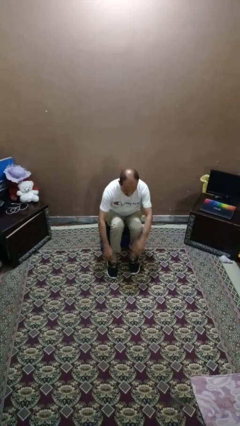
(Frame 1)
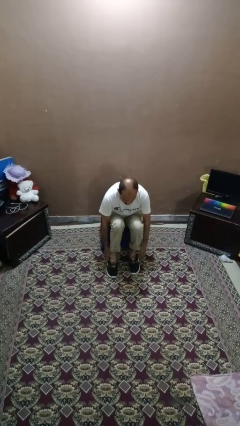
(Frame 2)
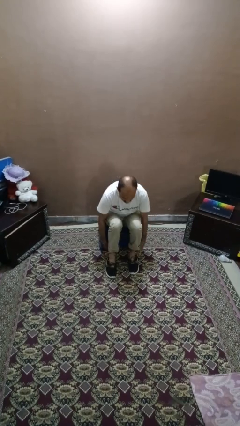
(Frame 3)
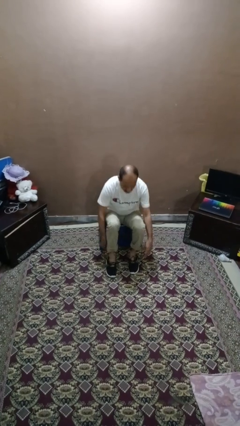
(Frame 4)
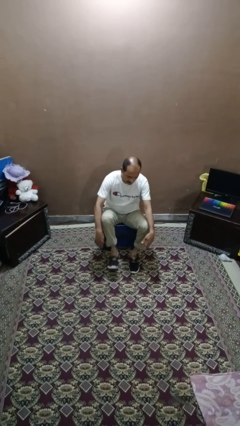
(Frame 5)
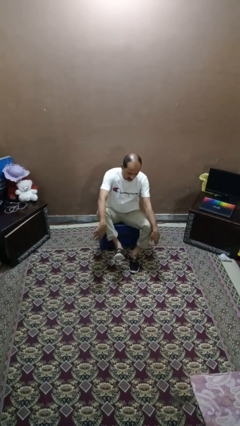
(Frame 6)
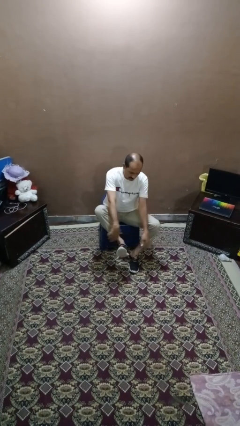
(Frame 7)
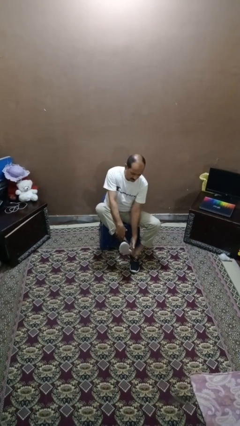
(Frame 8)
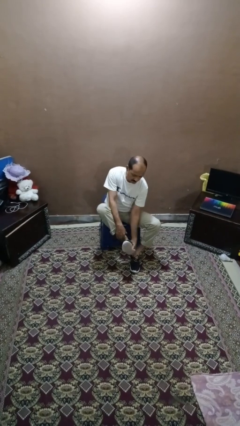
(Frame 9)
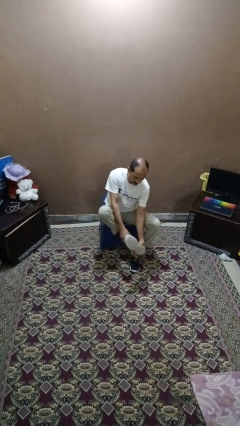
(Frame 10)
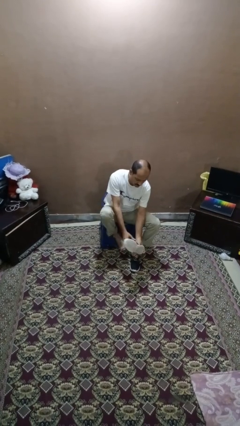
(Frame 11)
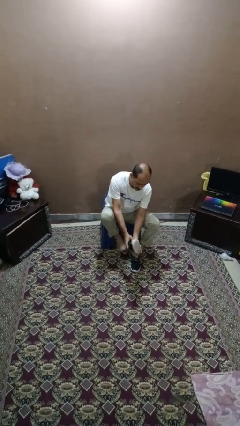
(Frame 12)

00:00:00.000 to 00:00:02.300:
person takes off shoes

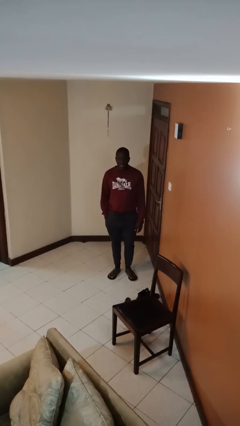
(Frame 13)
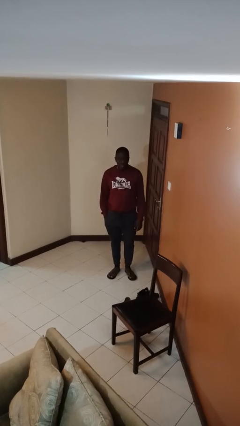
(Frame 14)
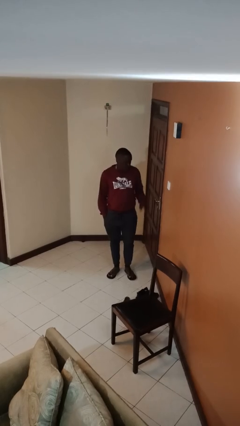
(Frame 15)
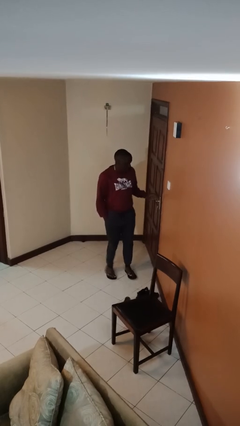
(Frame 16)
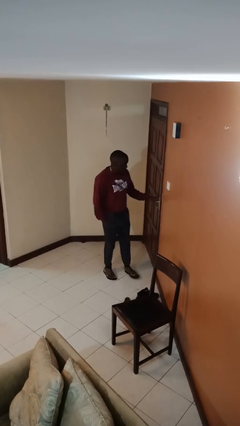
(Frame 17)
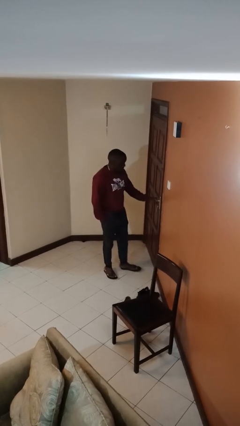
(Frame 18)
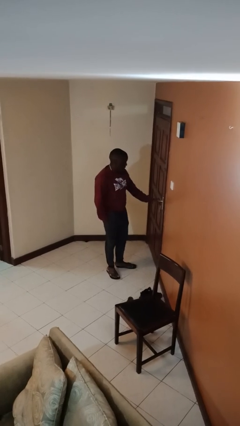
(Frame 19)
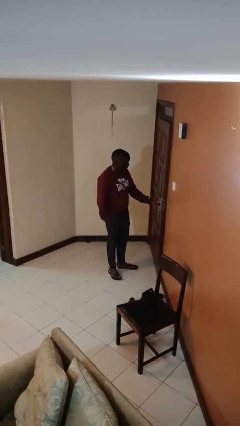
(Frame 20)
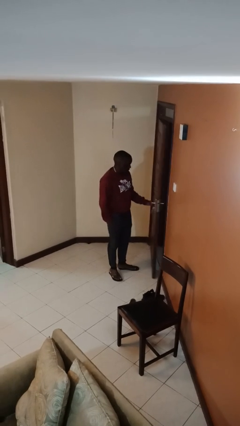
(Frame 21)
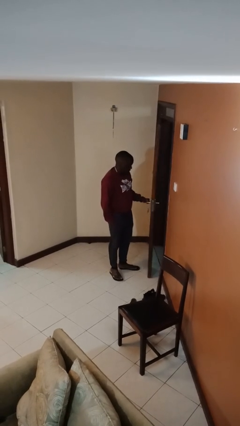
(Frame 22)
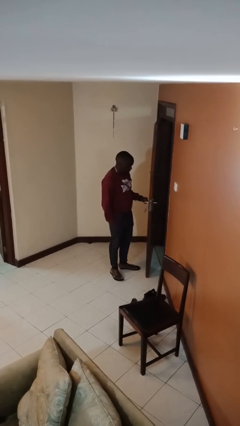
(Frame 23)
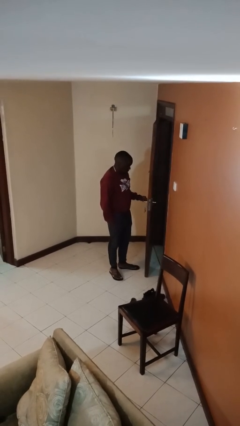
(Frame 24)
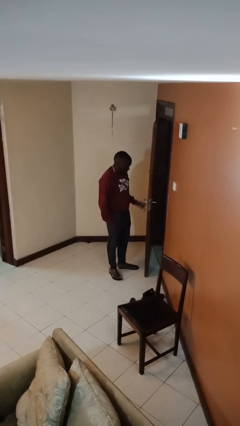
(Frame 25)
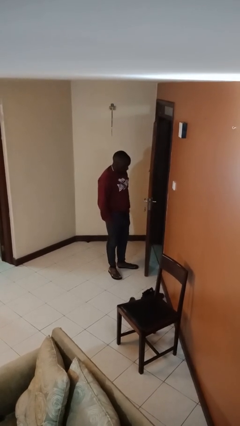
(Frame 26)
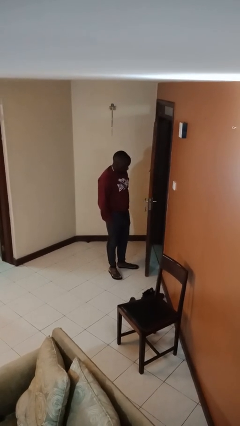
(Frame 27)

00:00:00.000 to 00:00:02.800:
person opens facility door

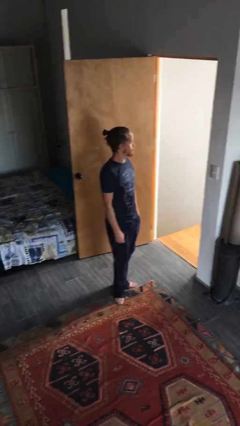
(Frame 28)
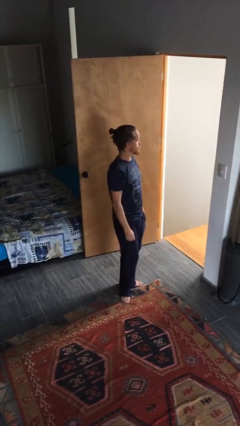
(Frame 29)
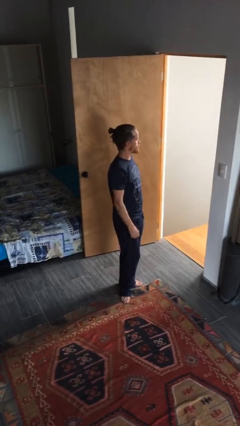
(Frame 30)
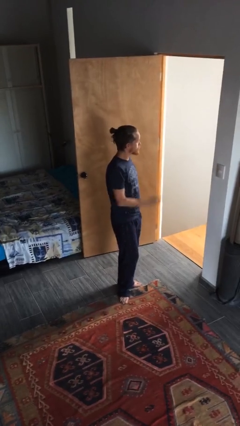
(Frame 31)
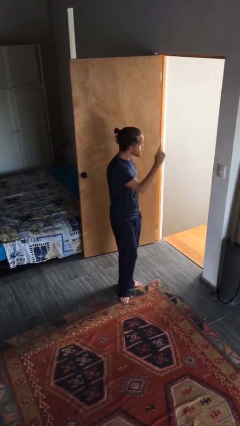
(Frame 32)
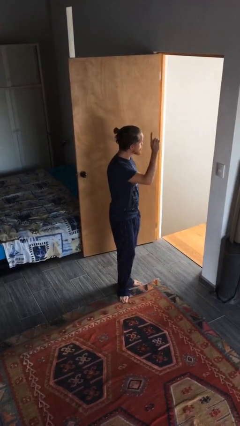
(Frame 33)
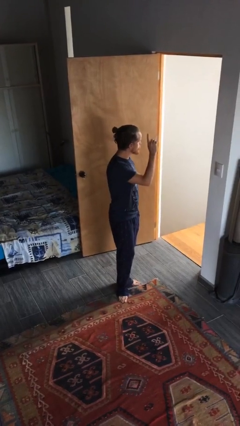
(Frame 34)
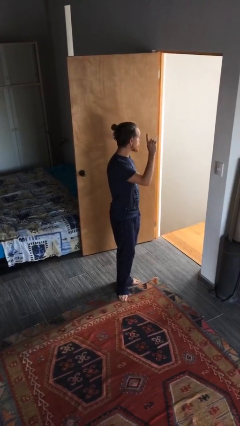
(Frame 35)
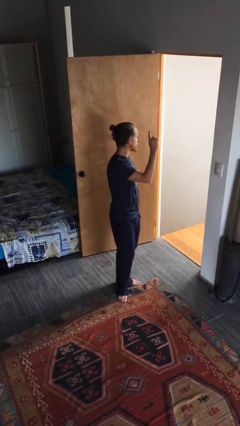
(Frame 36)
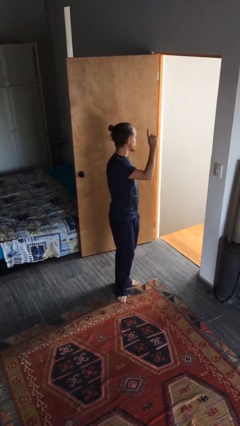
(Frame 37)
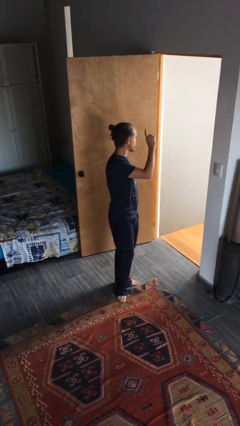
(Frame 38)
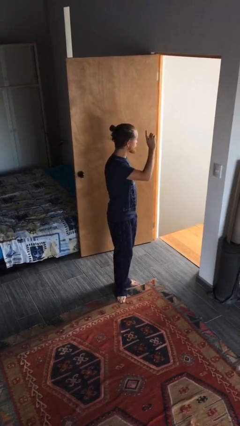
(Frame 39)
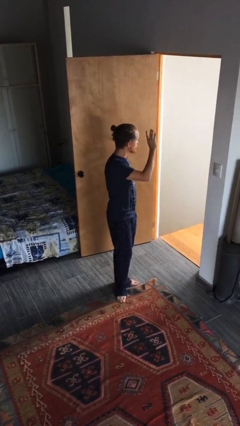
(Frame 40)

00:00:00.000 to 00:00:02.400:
person gestures raise hand

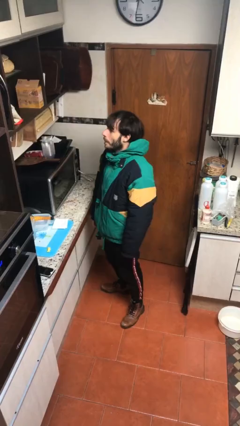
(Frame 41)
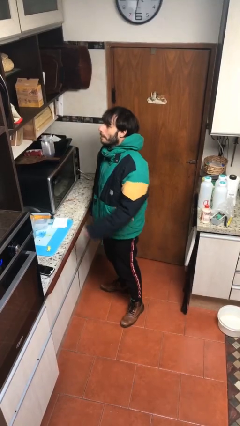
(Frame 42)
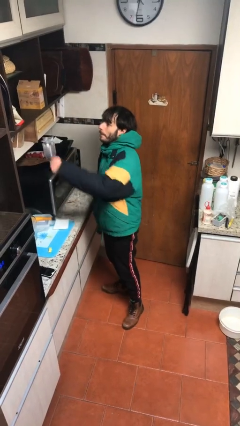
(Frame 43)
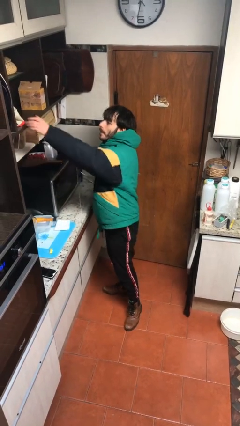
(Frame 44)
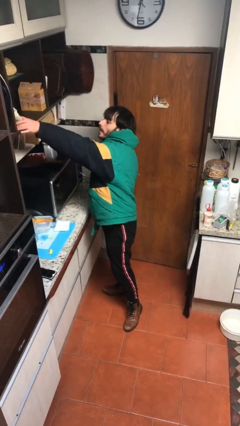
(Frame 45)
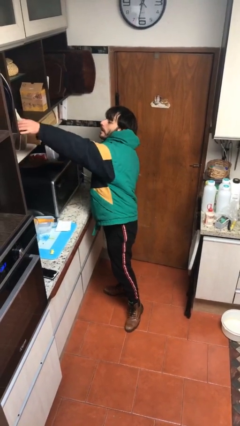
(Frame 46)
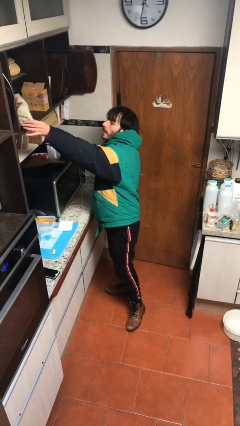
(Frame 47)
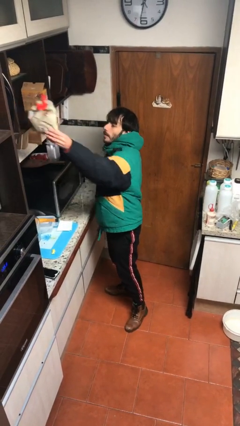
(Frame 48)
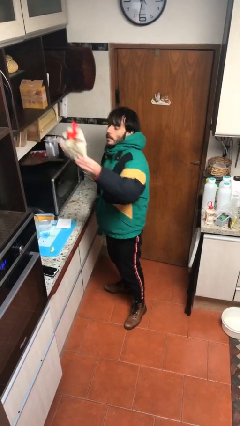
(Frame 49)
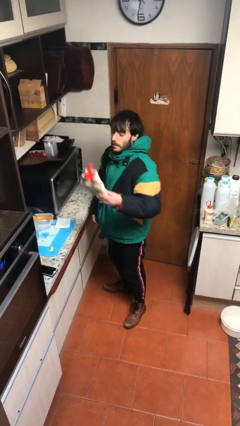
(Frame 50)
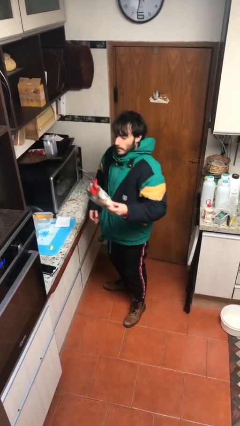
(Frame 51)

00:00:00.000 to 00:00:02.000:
person picks up object from cabinet

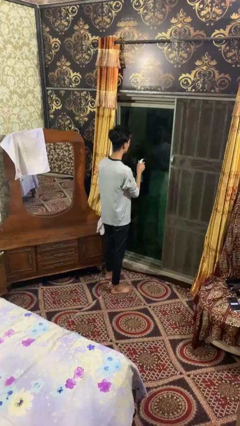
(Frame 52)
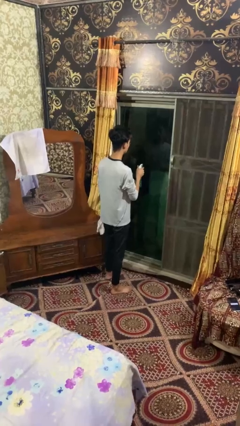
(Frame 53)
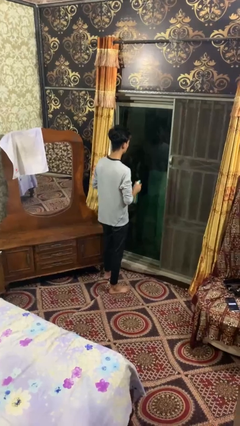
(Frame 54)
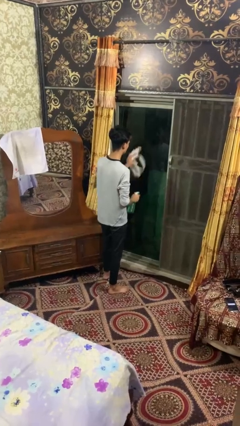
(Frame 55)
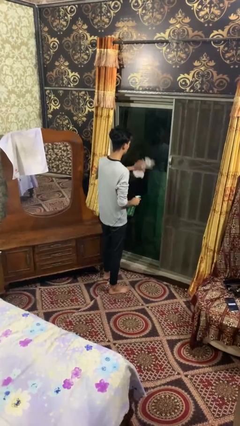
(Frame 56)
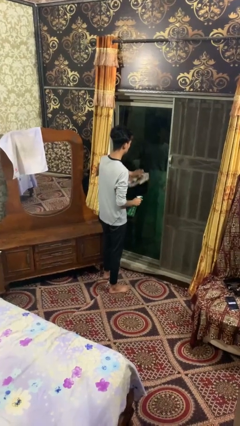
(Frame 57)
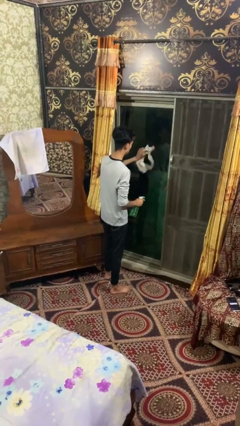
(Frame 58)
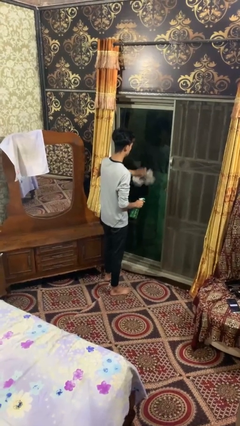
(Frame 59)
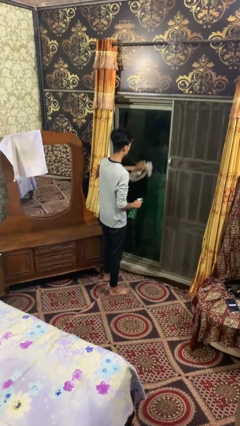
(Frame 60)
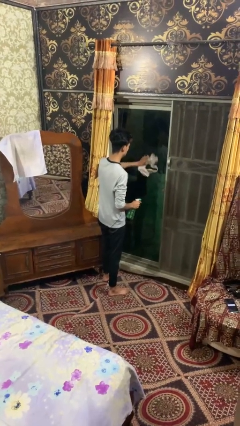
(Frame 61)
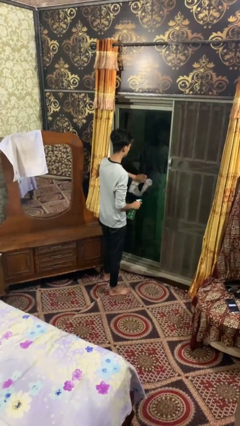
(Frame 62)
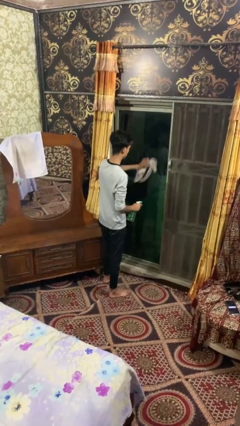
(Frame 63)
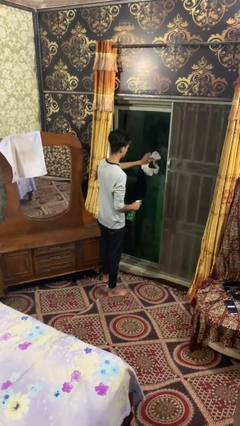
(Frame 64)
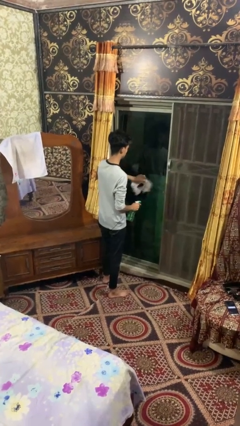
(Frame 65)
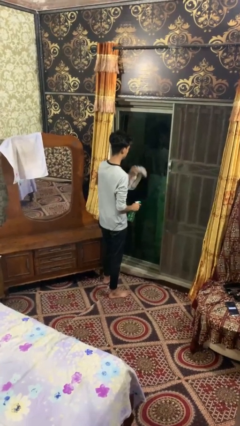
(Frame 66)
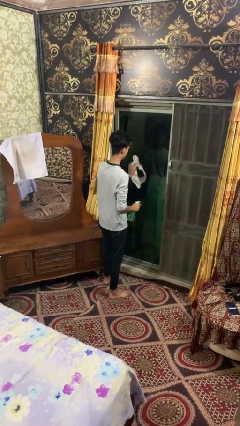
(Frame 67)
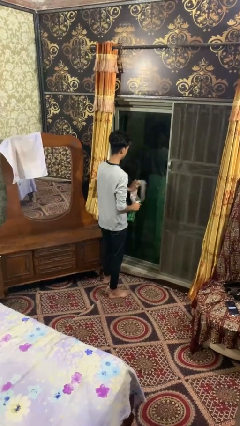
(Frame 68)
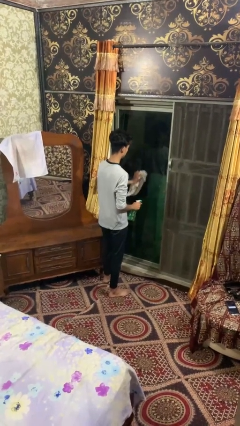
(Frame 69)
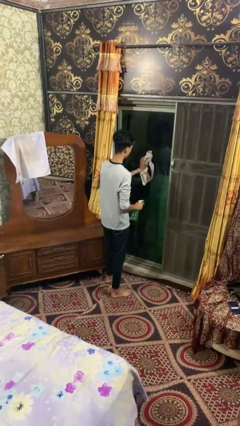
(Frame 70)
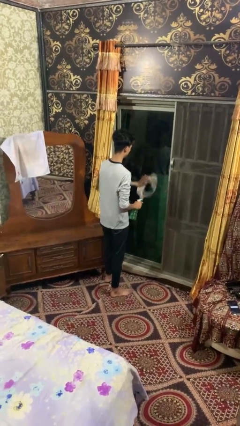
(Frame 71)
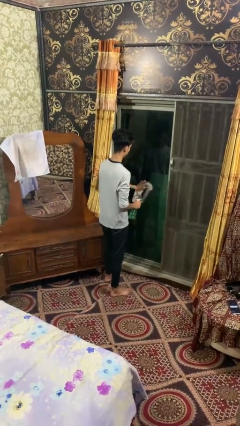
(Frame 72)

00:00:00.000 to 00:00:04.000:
person washes window

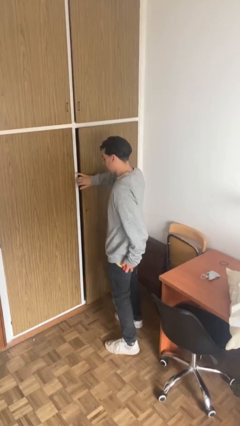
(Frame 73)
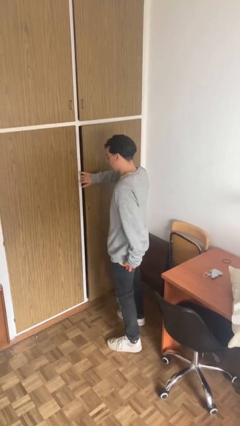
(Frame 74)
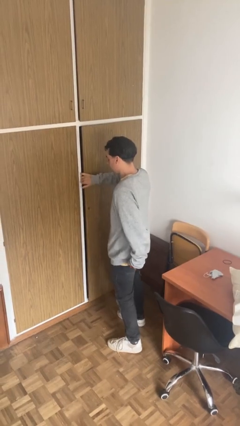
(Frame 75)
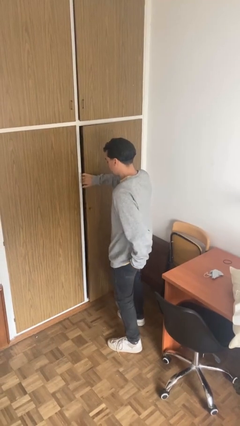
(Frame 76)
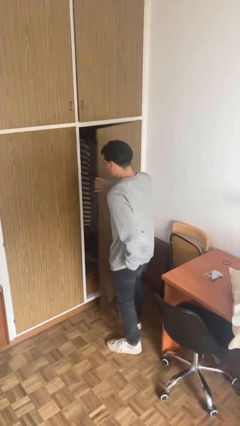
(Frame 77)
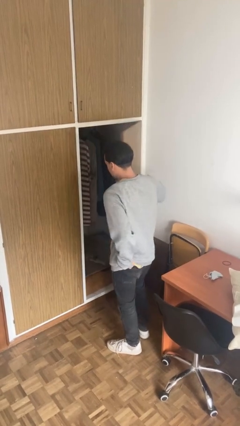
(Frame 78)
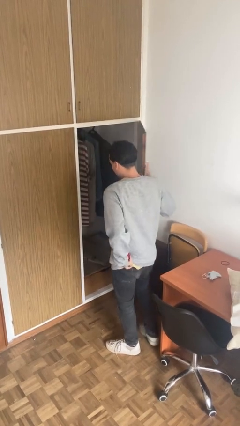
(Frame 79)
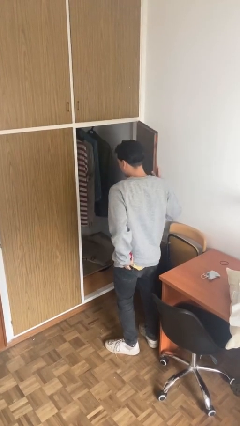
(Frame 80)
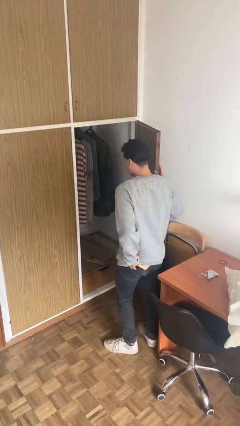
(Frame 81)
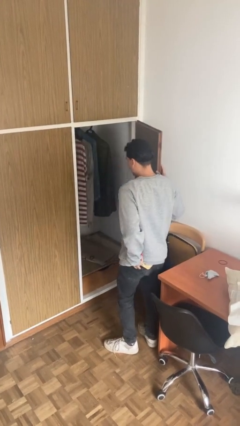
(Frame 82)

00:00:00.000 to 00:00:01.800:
person opens closet door

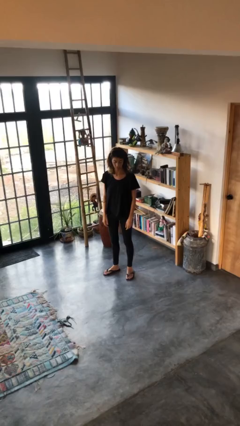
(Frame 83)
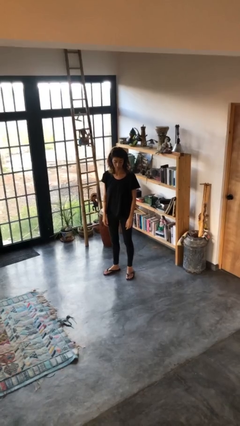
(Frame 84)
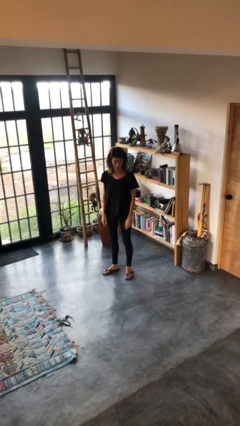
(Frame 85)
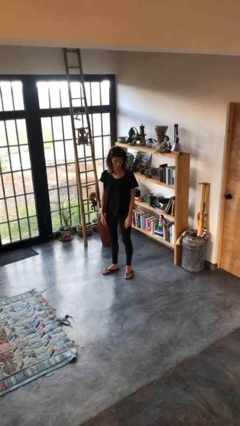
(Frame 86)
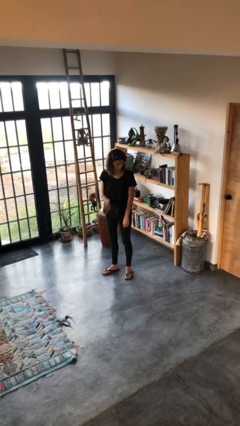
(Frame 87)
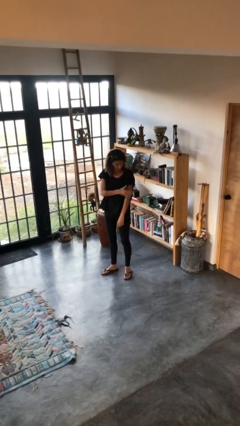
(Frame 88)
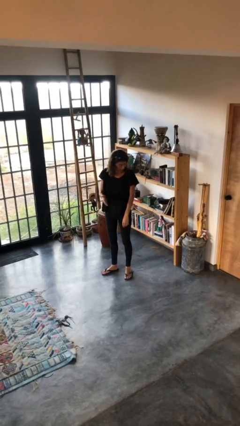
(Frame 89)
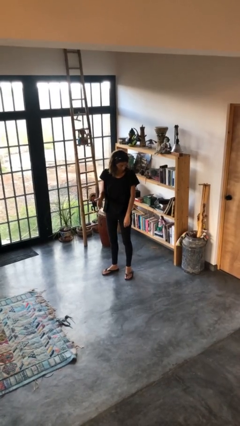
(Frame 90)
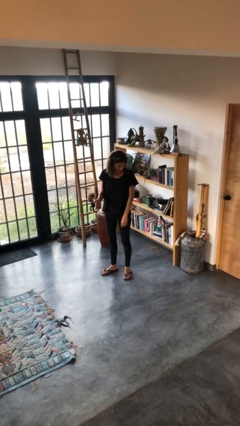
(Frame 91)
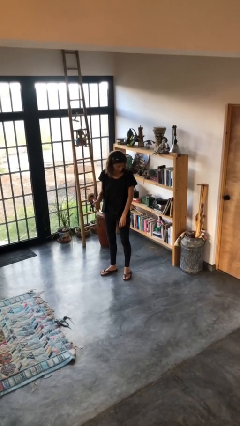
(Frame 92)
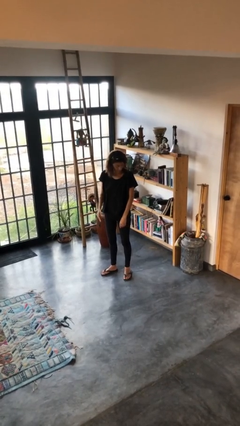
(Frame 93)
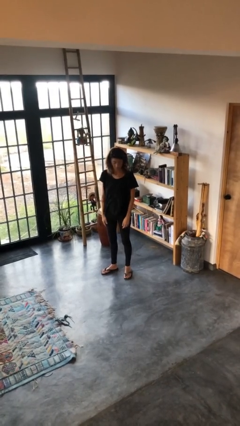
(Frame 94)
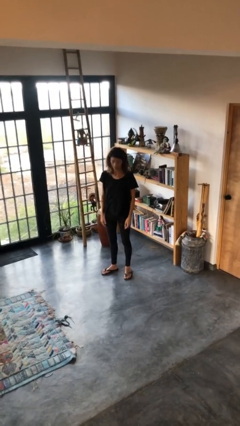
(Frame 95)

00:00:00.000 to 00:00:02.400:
person swats bug
